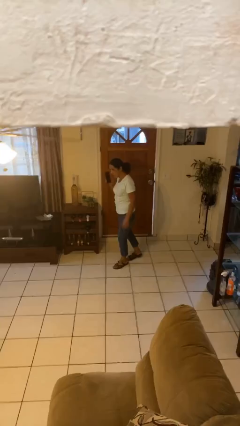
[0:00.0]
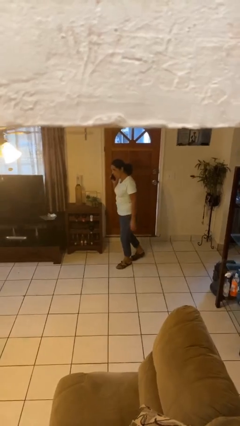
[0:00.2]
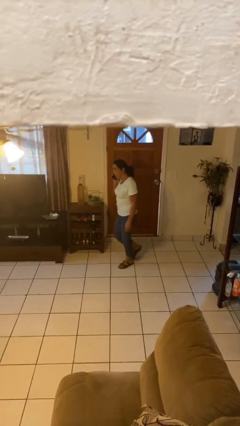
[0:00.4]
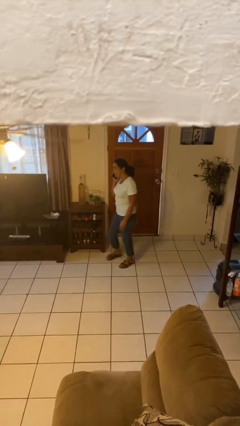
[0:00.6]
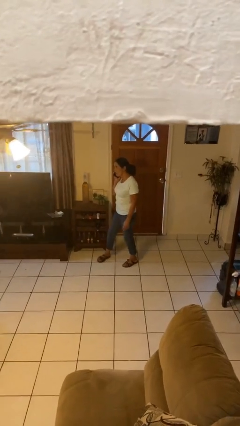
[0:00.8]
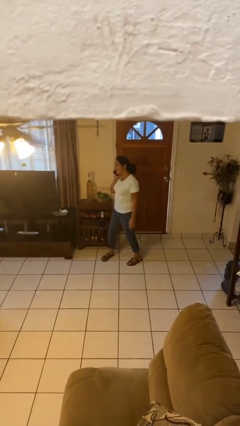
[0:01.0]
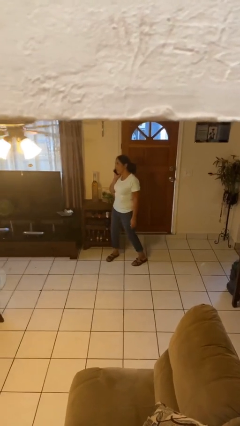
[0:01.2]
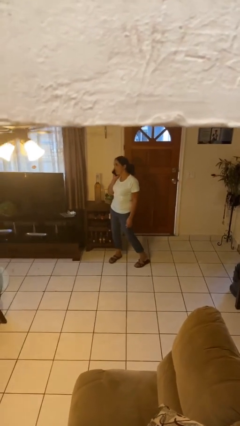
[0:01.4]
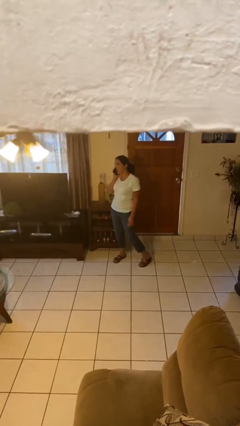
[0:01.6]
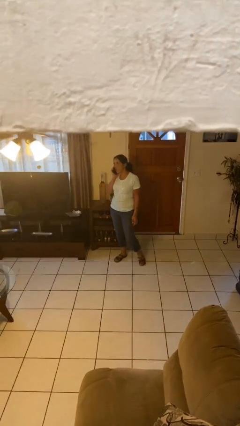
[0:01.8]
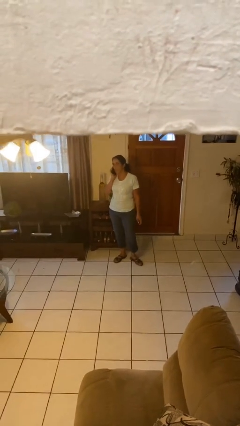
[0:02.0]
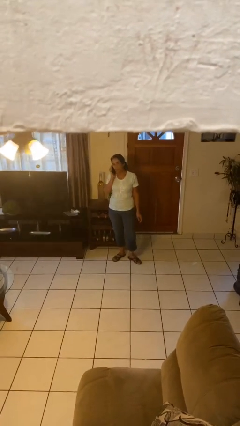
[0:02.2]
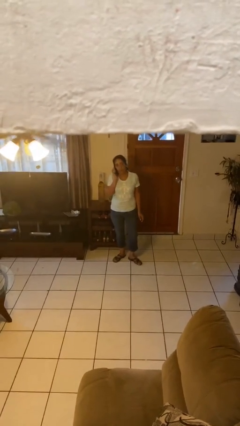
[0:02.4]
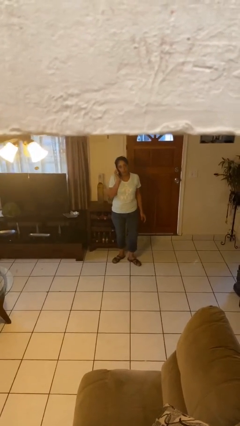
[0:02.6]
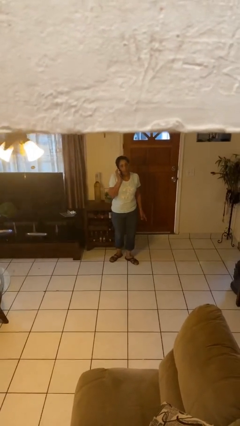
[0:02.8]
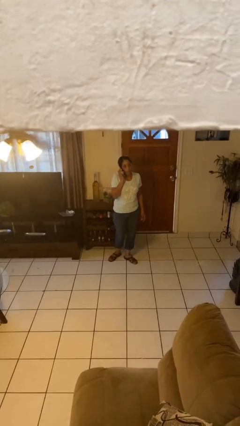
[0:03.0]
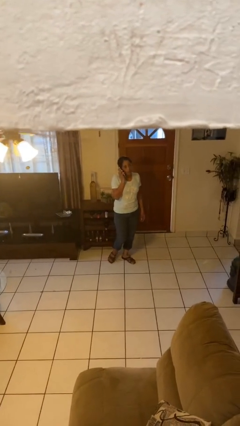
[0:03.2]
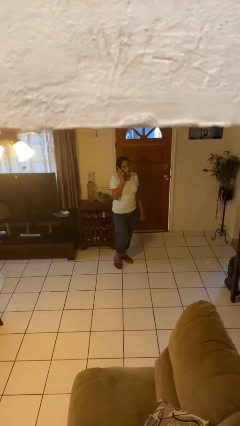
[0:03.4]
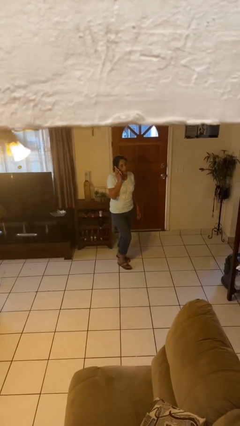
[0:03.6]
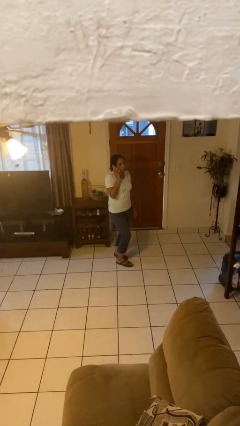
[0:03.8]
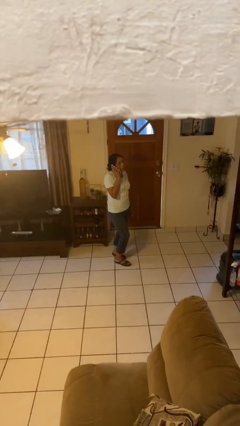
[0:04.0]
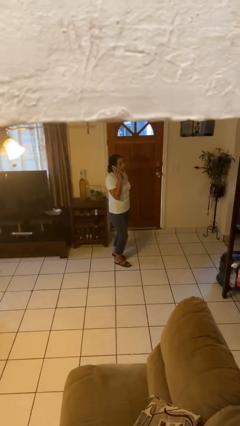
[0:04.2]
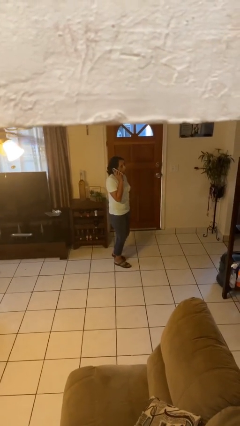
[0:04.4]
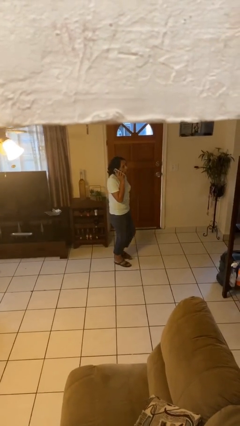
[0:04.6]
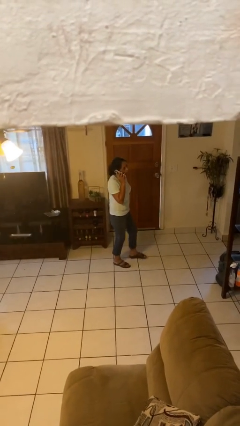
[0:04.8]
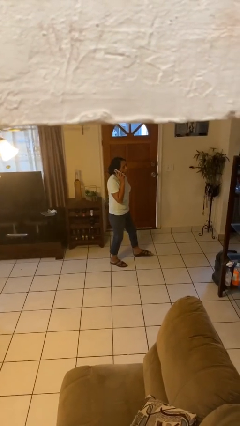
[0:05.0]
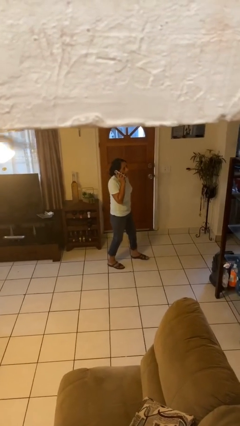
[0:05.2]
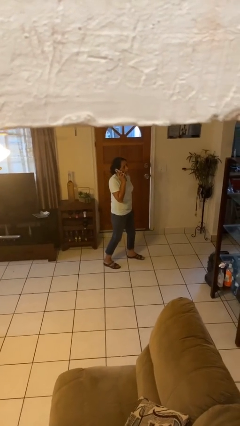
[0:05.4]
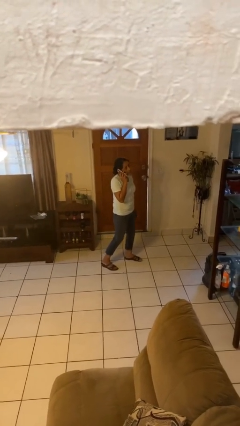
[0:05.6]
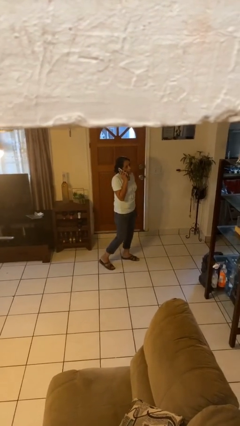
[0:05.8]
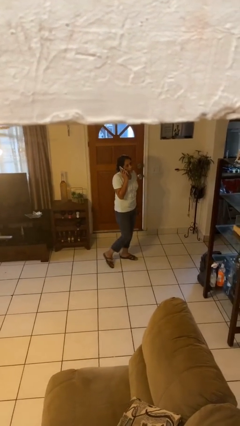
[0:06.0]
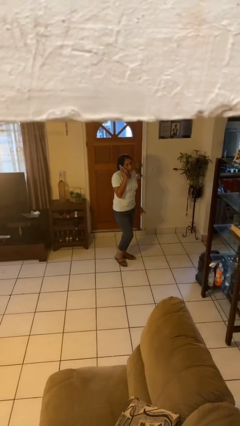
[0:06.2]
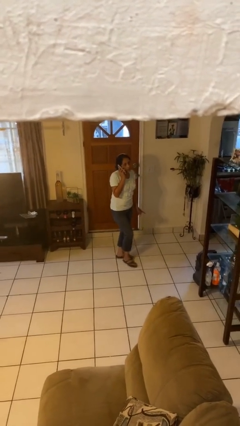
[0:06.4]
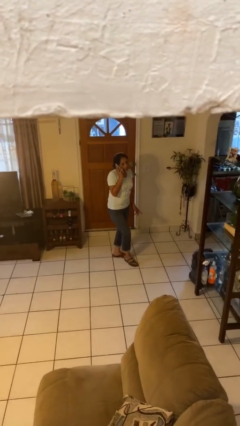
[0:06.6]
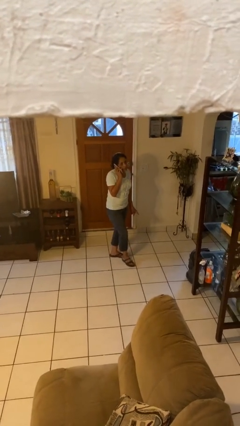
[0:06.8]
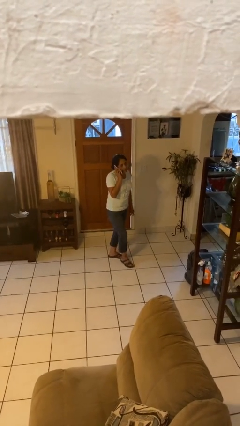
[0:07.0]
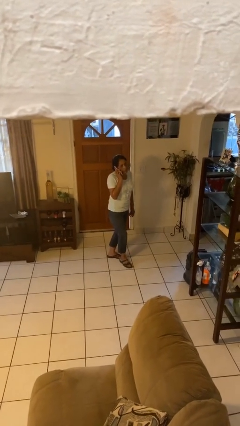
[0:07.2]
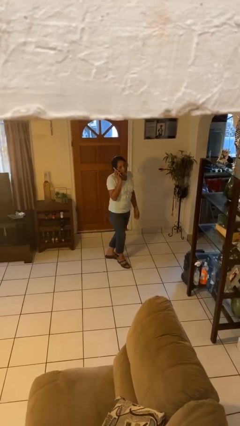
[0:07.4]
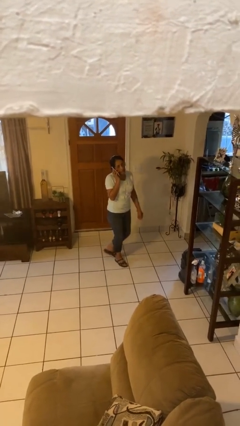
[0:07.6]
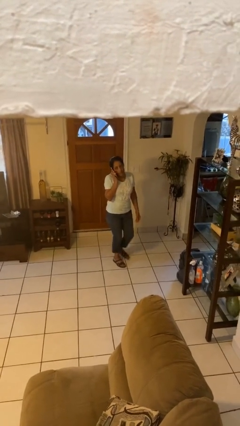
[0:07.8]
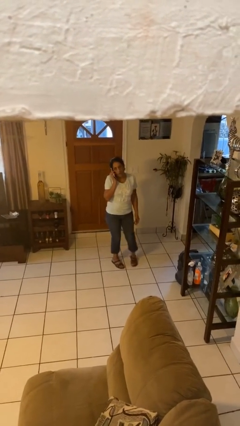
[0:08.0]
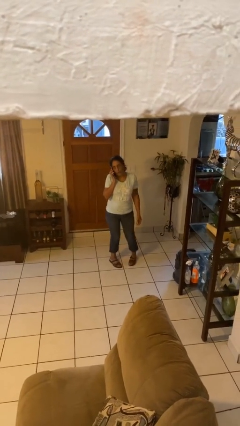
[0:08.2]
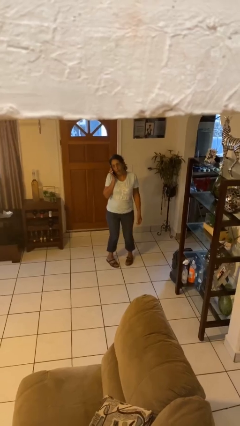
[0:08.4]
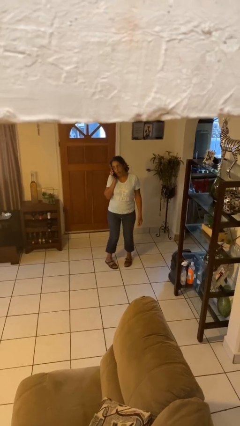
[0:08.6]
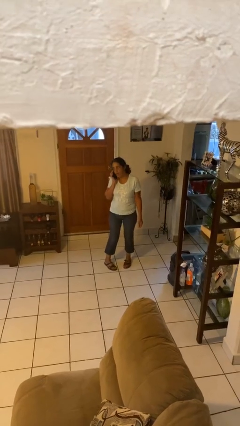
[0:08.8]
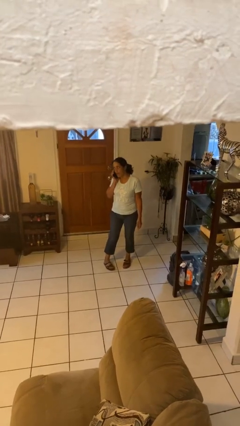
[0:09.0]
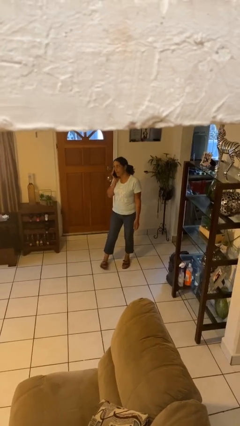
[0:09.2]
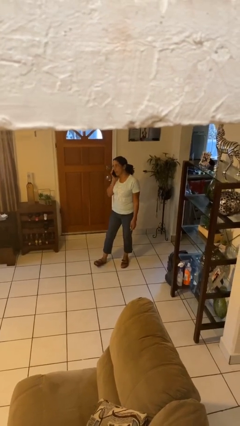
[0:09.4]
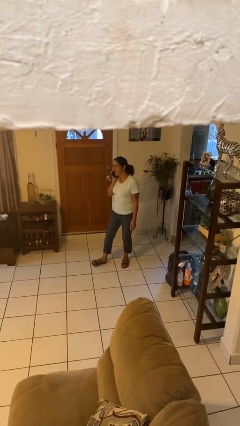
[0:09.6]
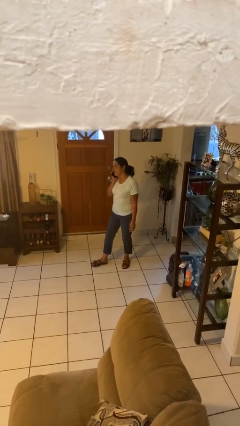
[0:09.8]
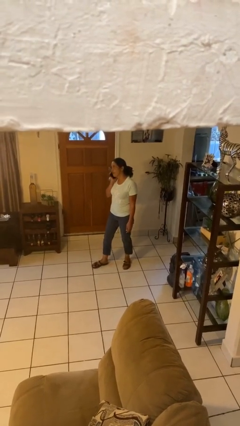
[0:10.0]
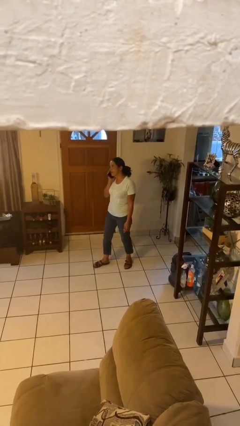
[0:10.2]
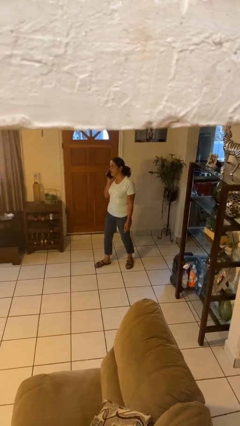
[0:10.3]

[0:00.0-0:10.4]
person talks on phone

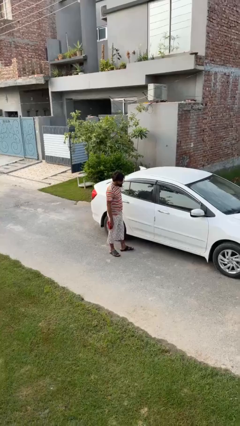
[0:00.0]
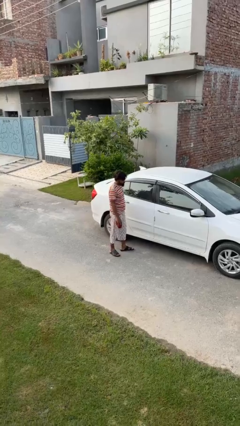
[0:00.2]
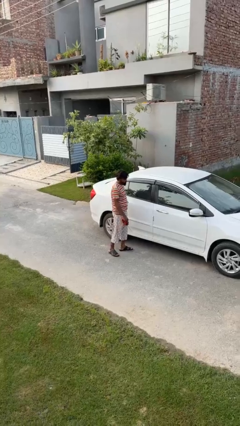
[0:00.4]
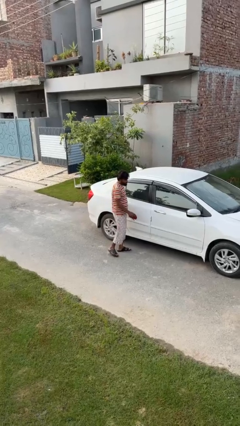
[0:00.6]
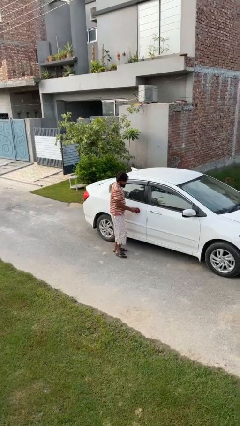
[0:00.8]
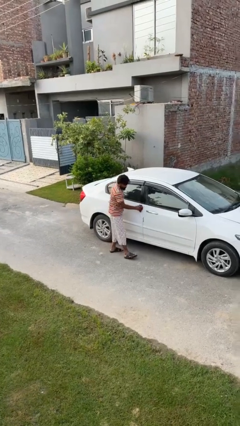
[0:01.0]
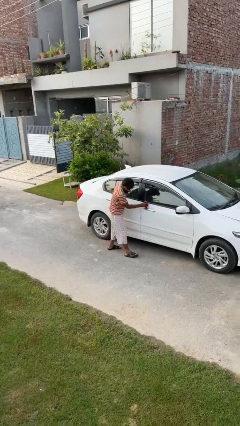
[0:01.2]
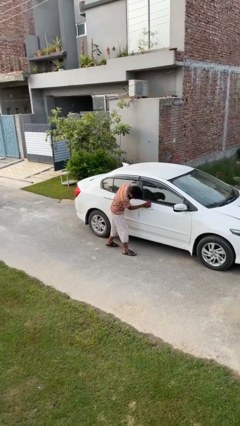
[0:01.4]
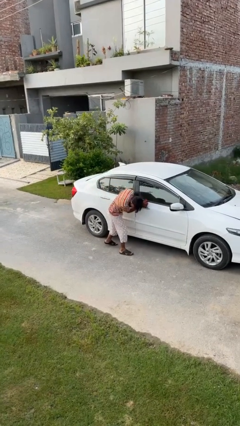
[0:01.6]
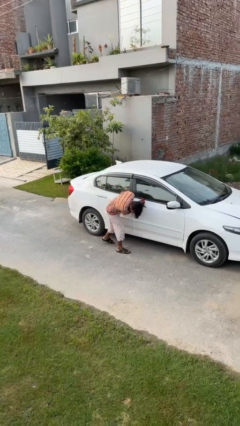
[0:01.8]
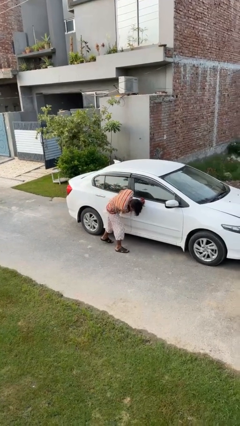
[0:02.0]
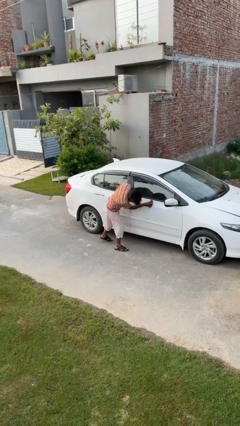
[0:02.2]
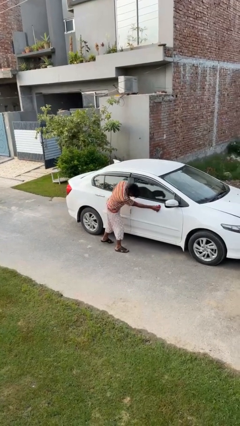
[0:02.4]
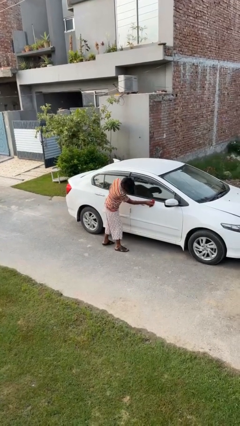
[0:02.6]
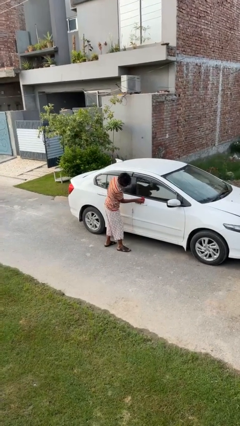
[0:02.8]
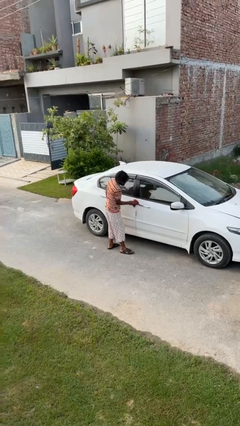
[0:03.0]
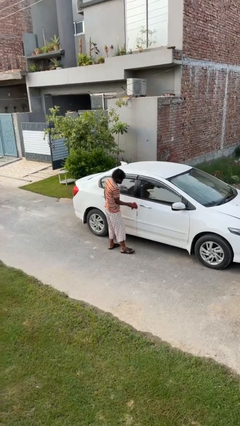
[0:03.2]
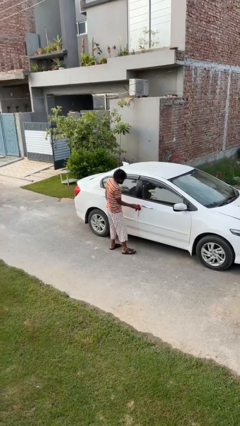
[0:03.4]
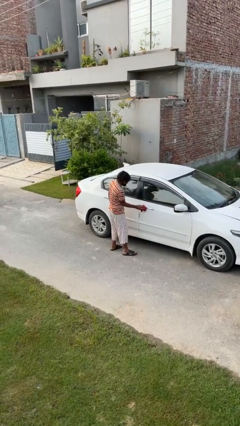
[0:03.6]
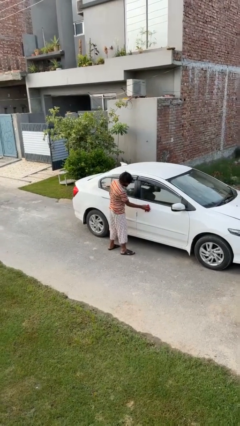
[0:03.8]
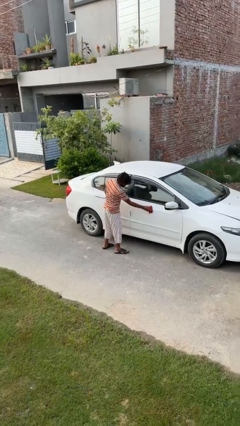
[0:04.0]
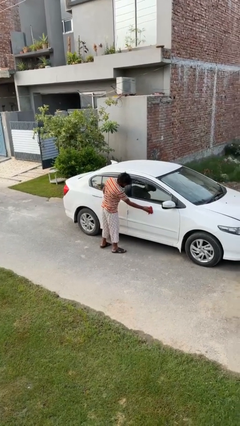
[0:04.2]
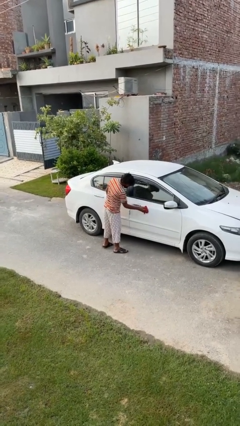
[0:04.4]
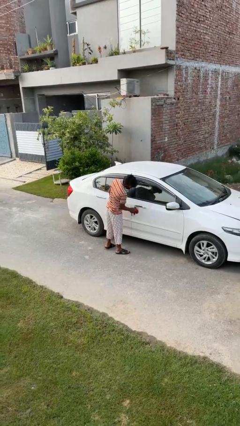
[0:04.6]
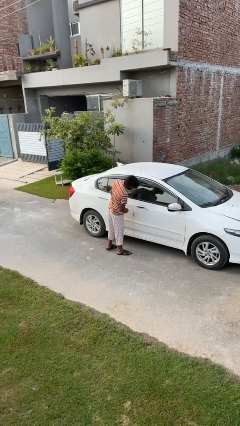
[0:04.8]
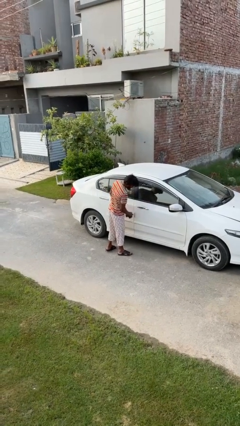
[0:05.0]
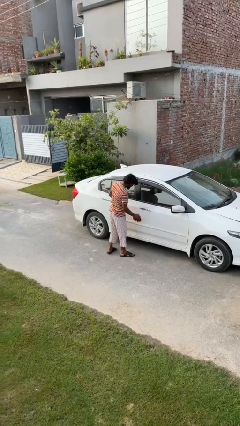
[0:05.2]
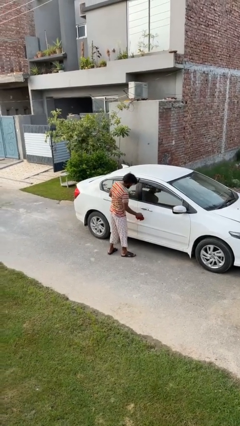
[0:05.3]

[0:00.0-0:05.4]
person polishes car with rag

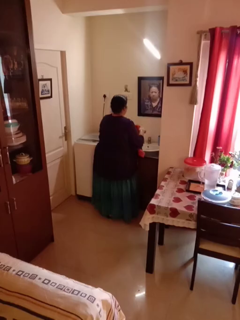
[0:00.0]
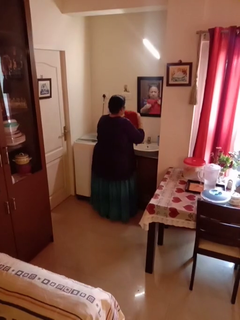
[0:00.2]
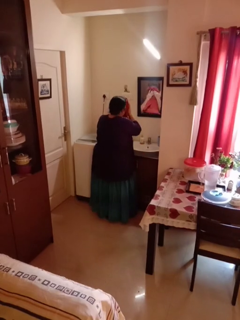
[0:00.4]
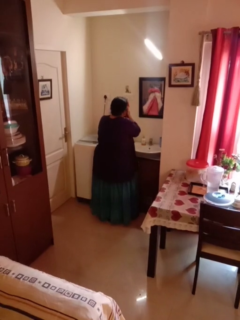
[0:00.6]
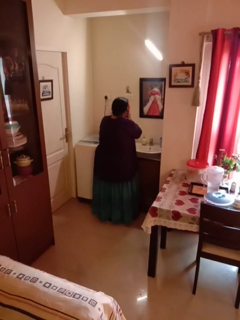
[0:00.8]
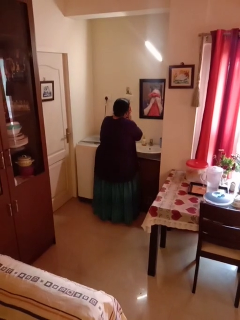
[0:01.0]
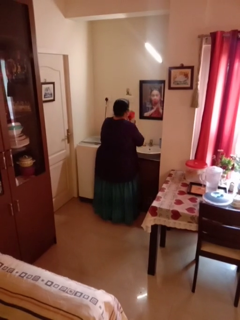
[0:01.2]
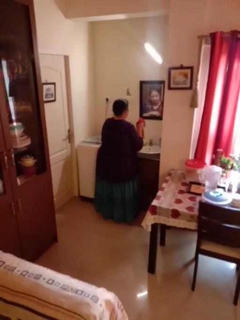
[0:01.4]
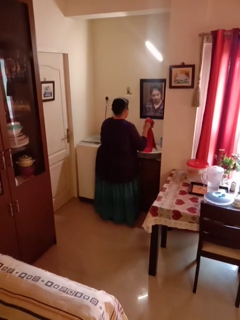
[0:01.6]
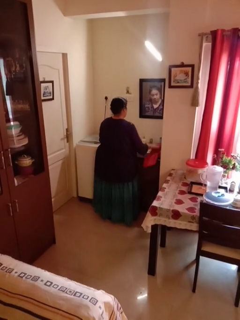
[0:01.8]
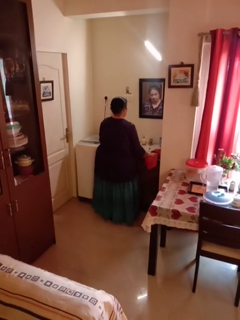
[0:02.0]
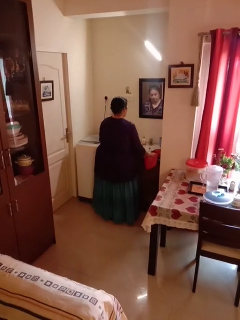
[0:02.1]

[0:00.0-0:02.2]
person dries face with towel

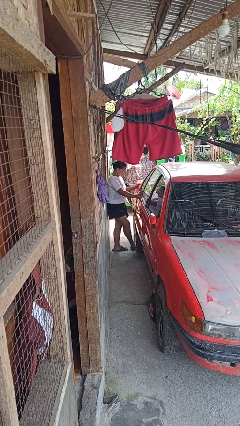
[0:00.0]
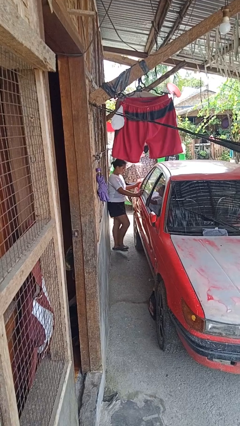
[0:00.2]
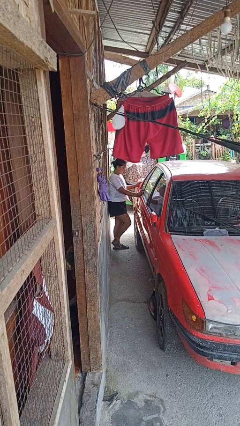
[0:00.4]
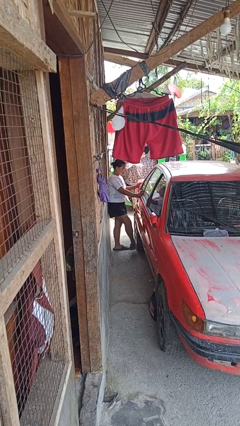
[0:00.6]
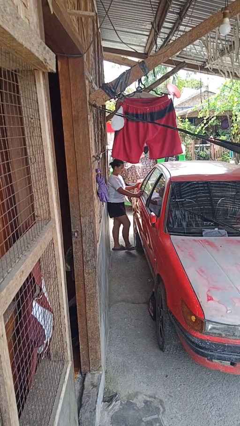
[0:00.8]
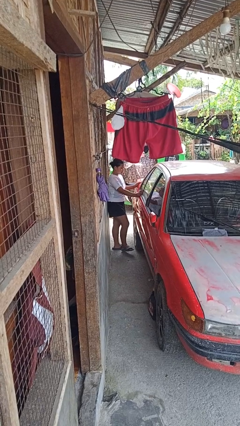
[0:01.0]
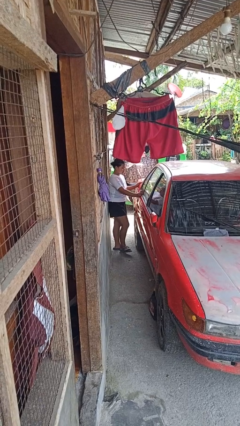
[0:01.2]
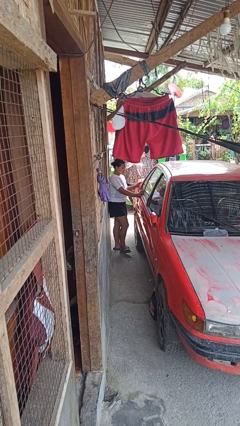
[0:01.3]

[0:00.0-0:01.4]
person kicks car tires
